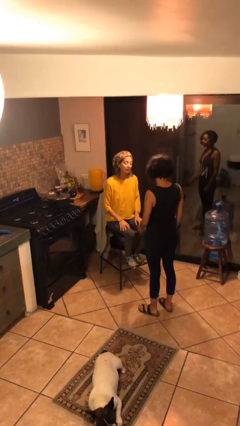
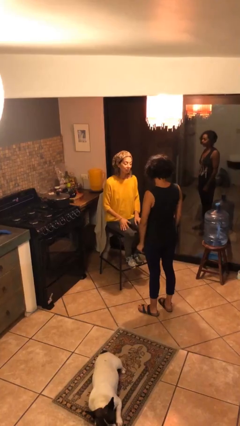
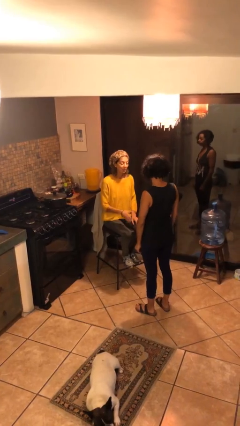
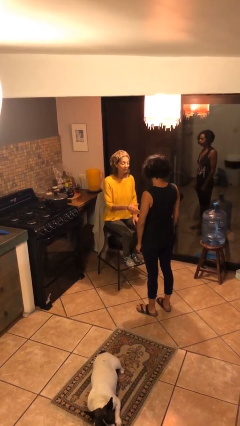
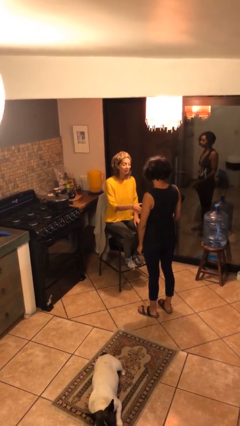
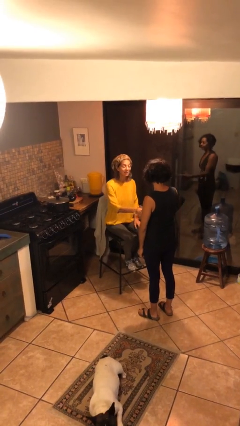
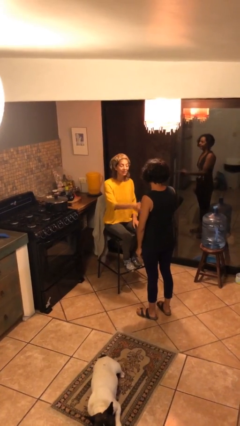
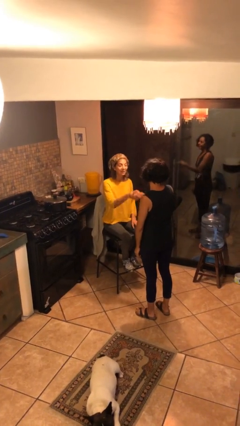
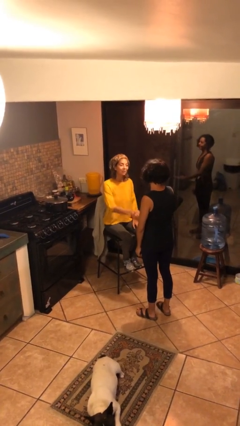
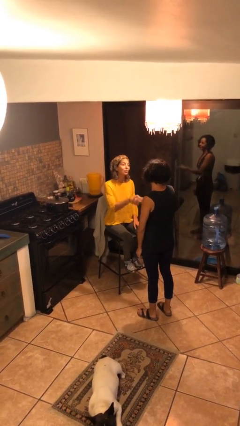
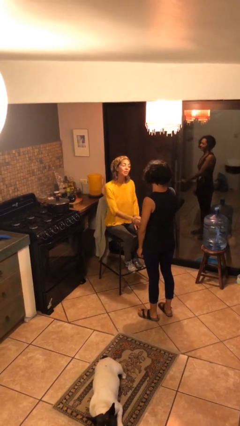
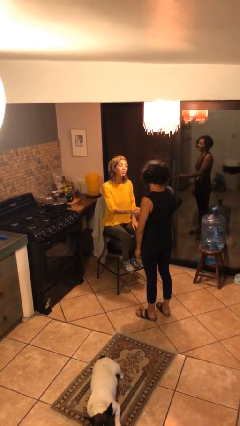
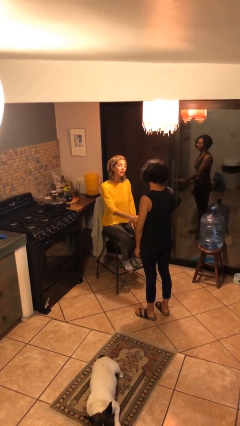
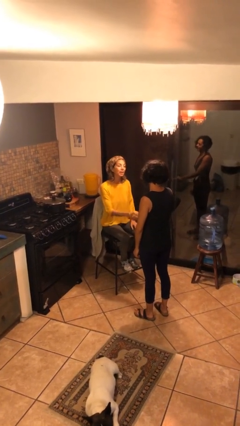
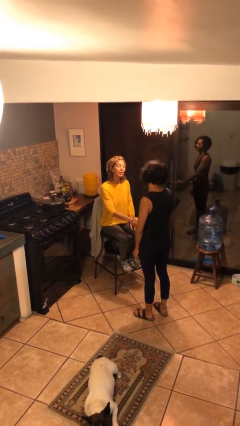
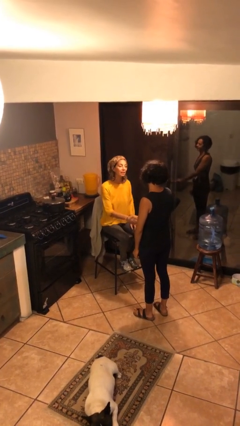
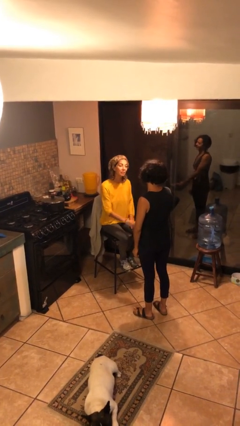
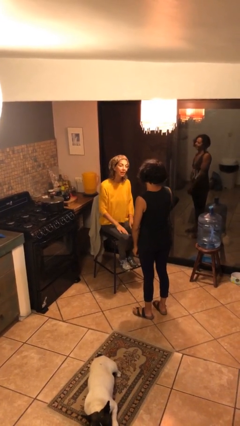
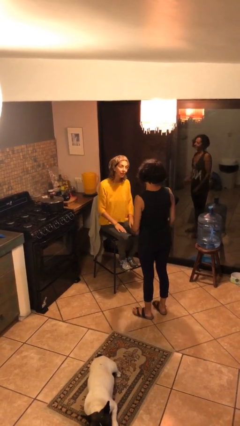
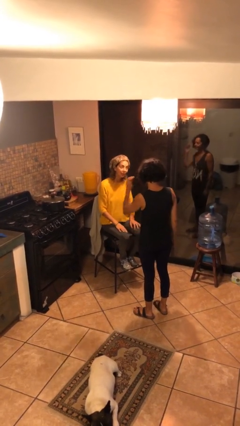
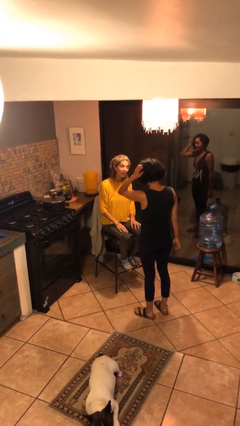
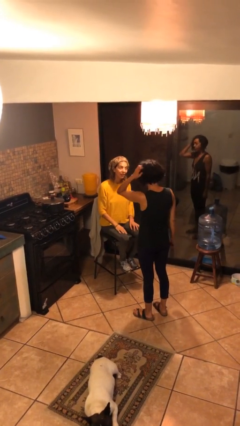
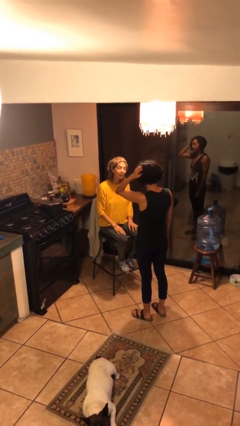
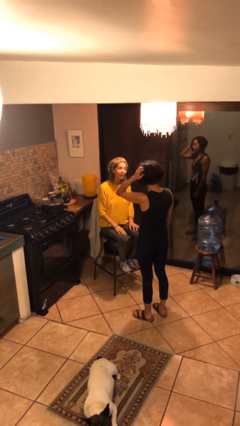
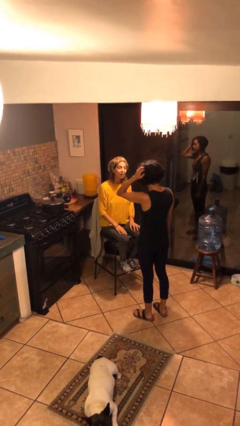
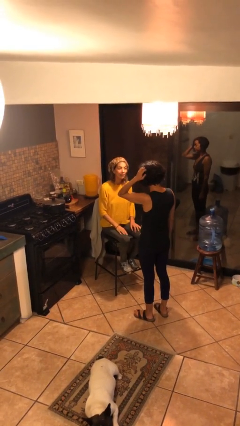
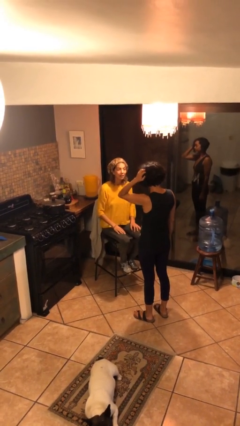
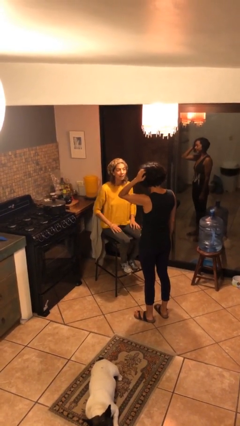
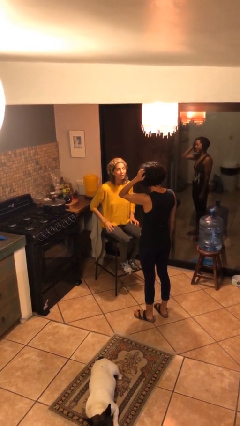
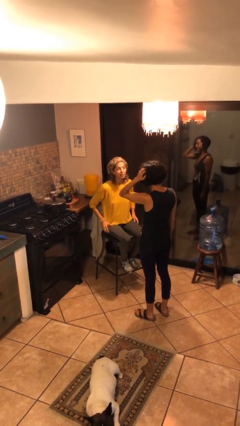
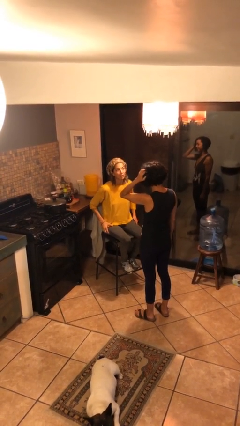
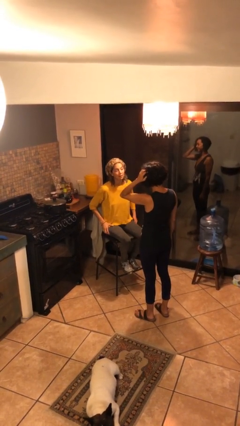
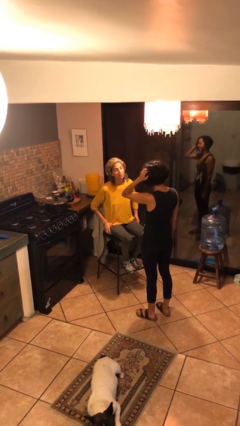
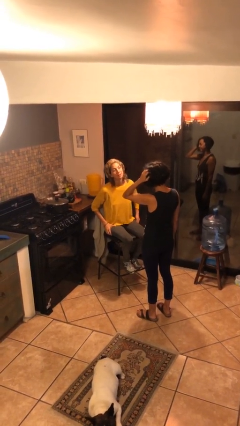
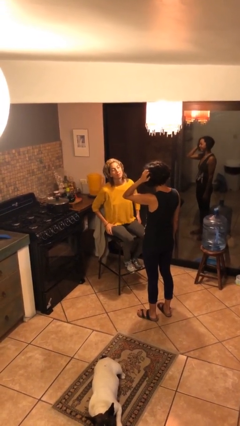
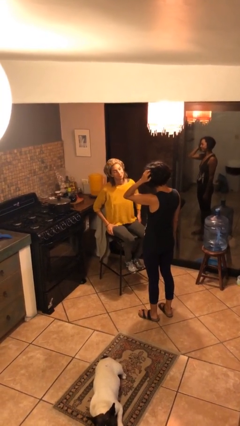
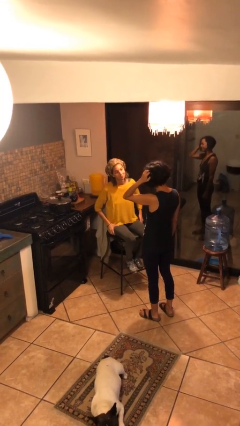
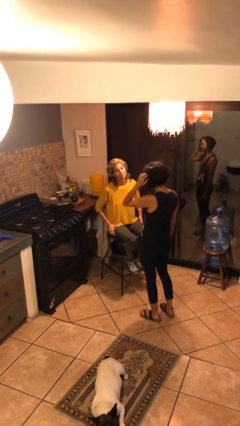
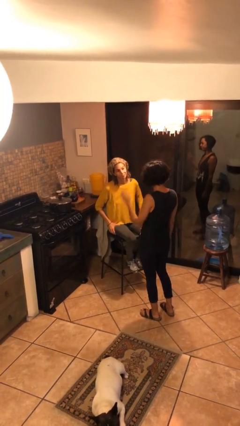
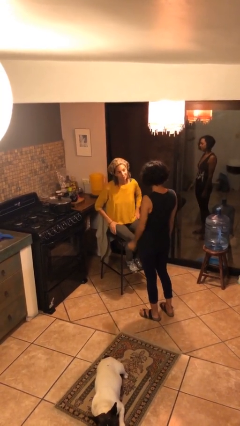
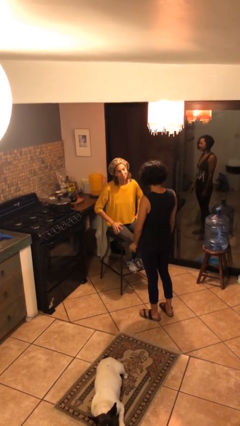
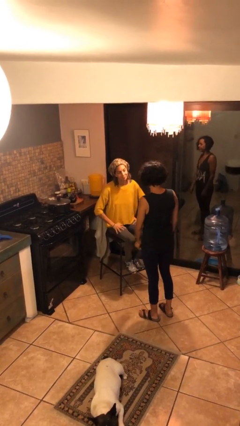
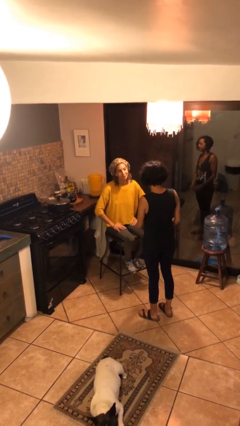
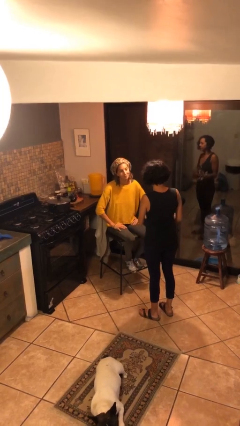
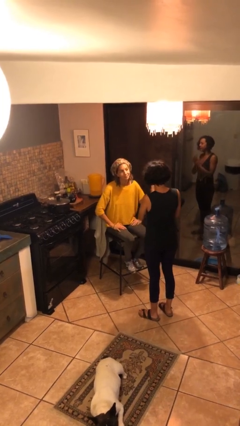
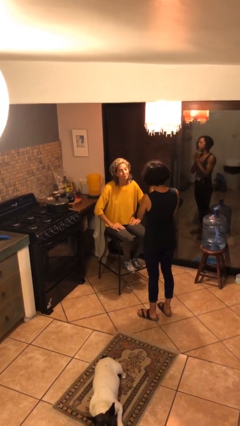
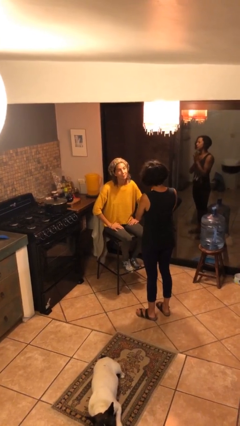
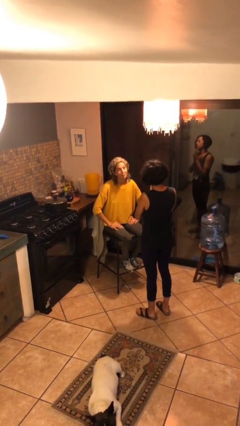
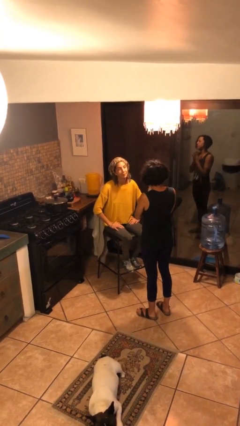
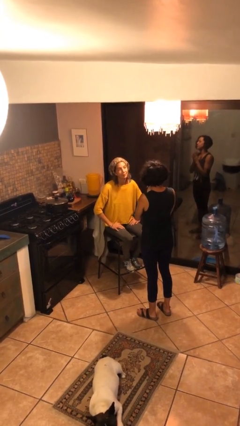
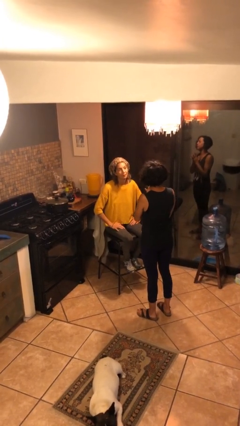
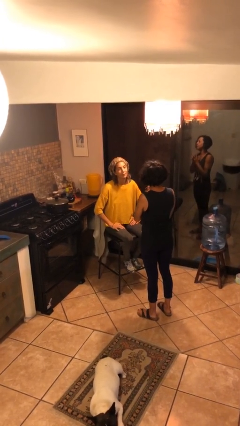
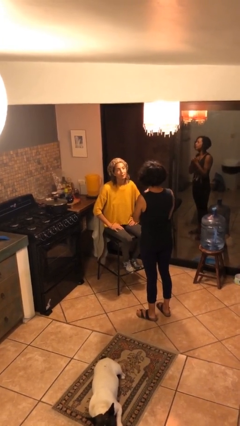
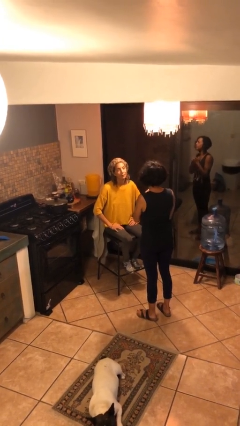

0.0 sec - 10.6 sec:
person shakes hand

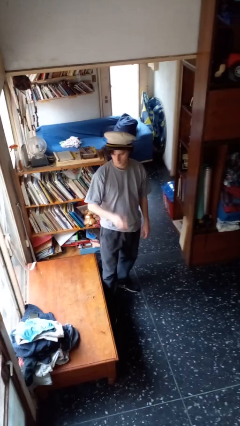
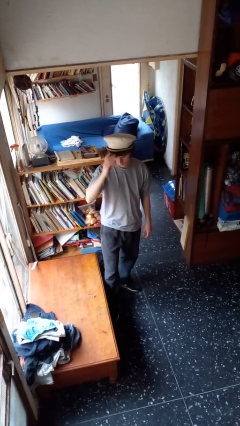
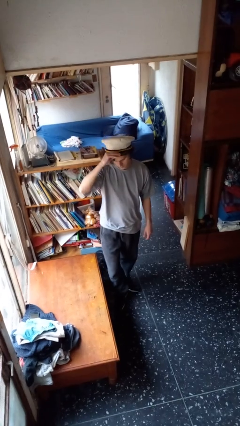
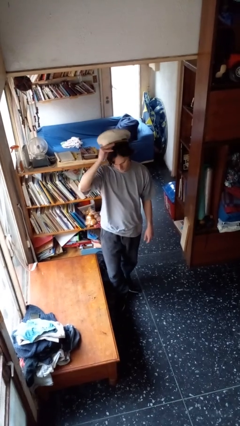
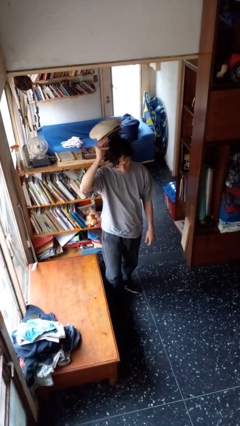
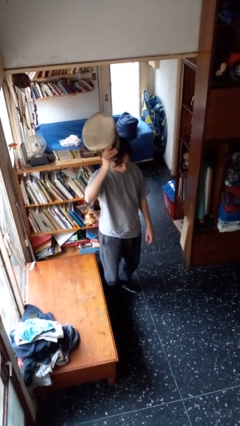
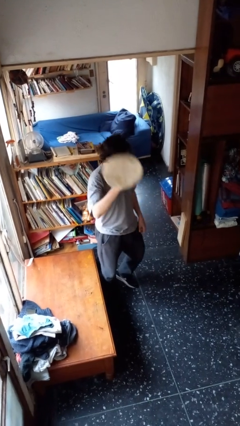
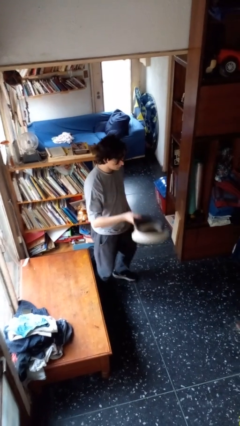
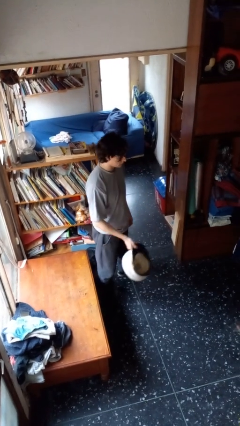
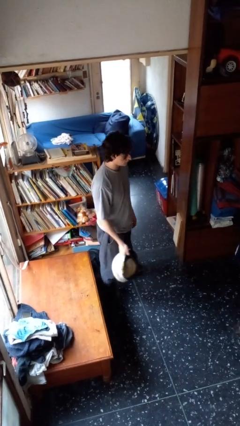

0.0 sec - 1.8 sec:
person takes off hat

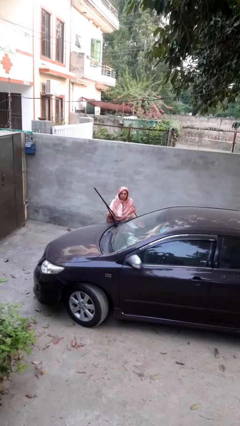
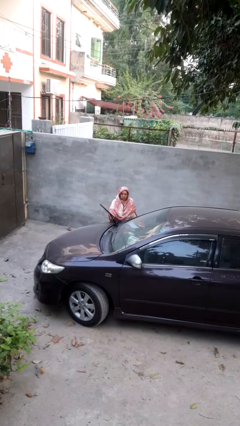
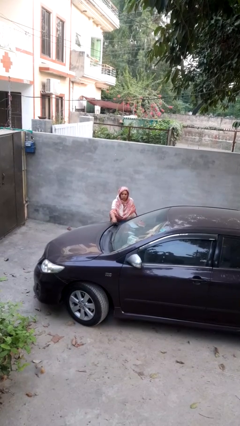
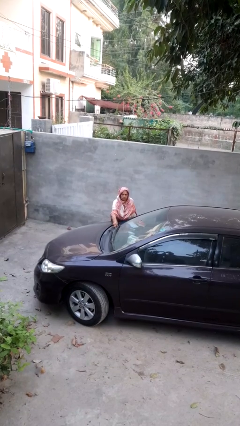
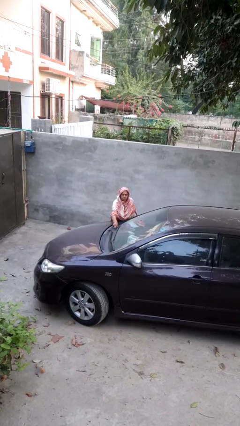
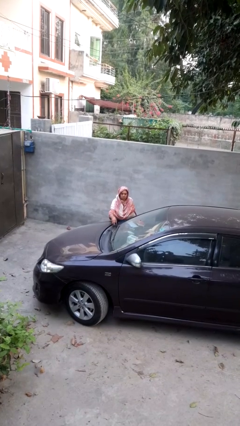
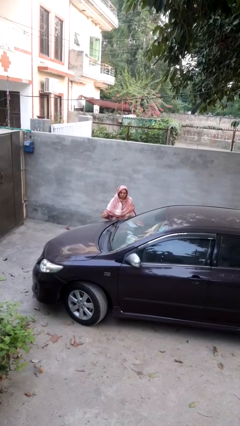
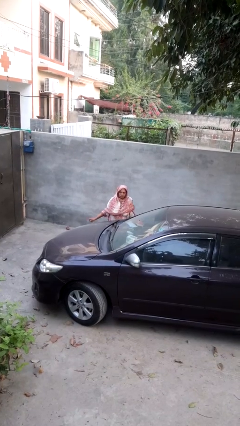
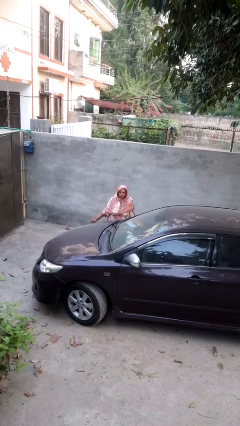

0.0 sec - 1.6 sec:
person flips down car wipers

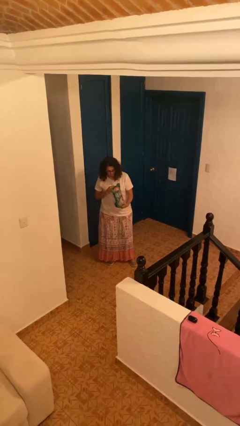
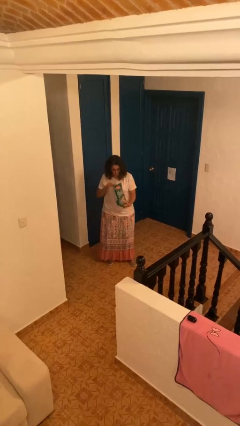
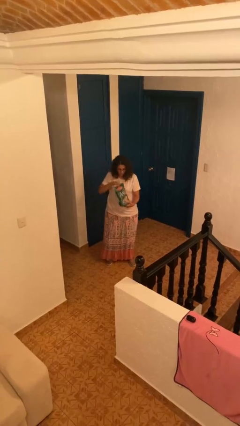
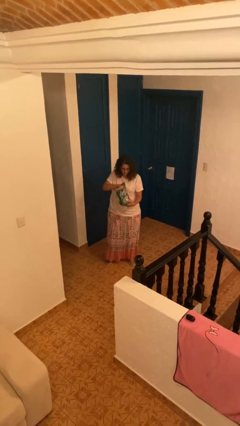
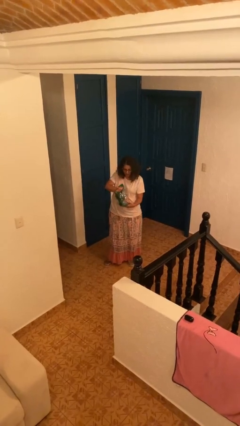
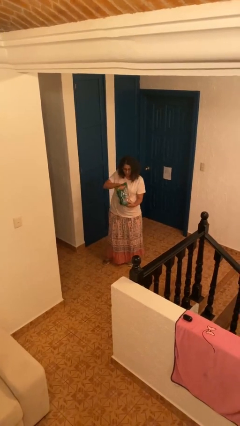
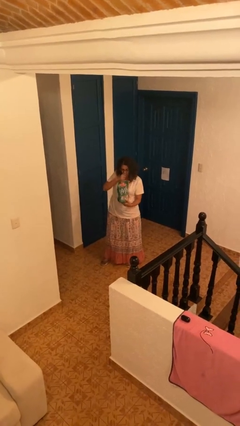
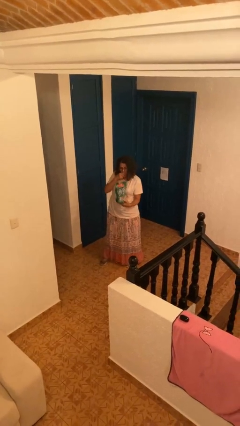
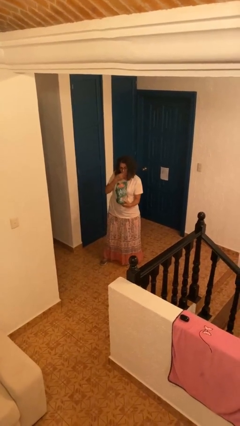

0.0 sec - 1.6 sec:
person eats snack from bag

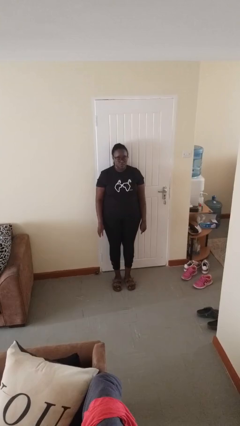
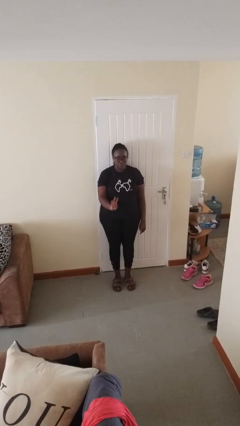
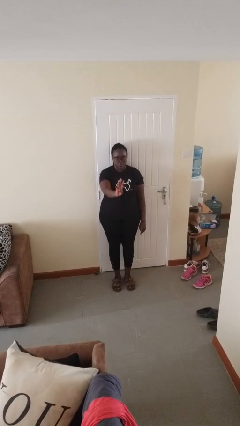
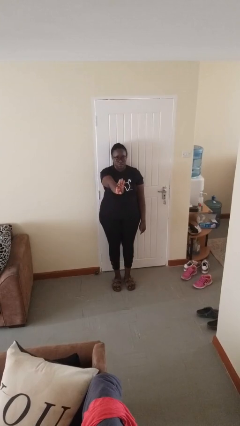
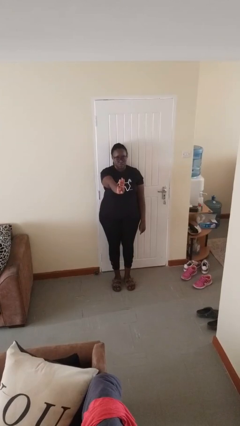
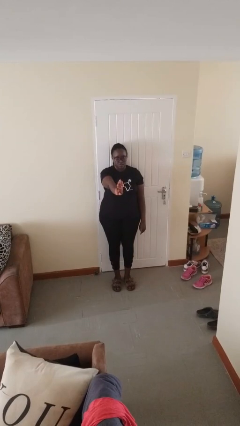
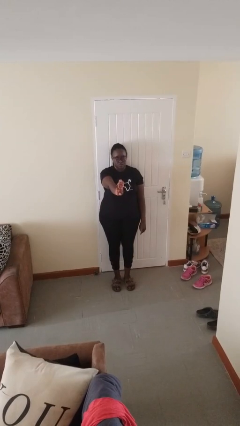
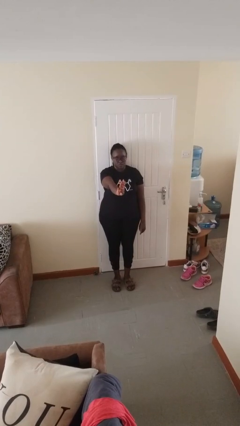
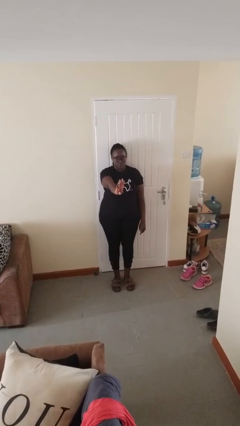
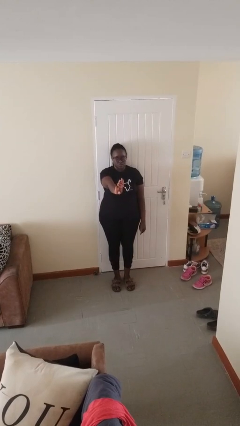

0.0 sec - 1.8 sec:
person gestures number three
